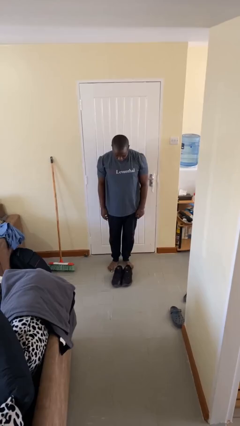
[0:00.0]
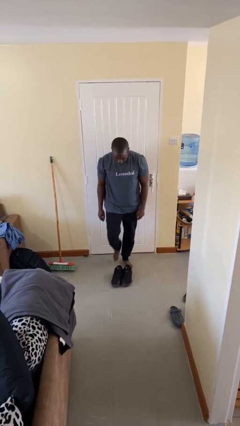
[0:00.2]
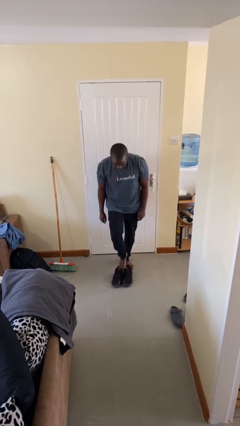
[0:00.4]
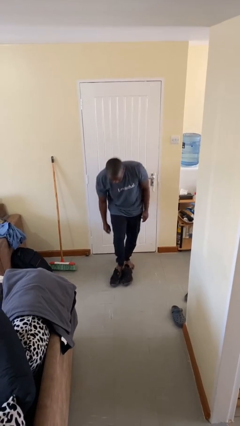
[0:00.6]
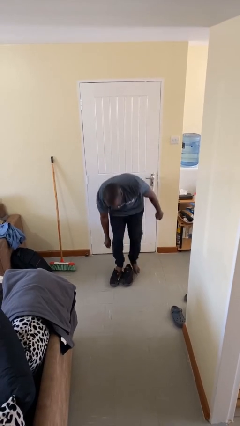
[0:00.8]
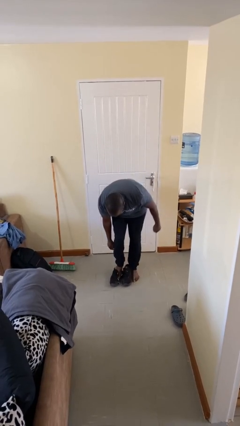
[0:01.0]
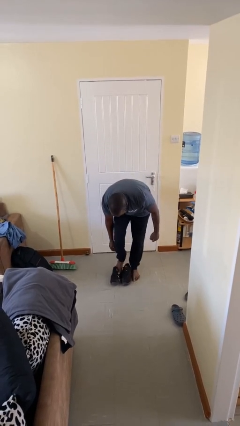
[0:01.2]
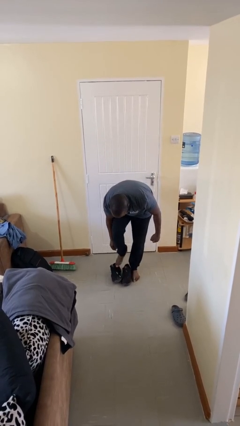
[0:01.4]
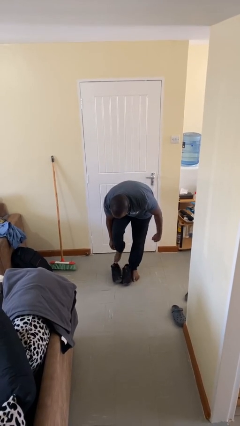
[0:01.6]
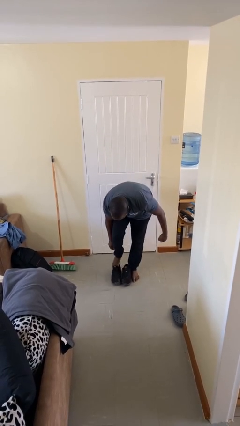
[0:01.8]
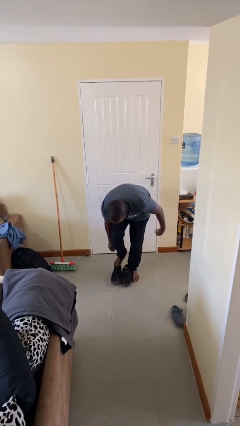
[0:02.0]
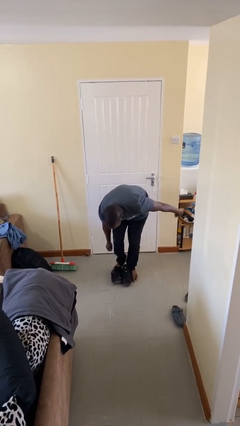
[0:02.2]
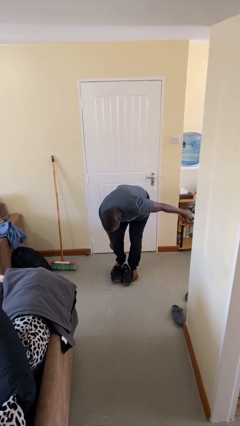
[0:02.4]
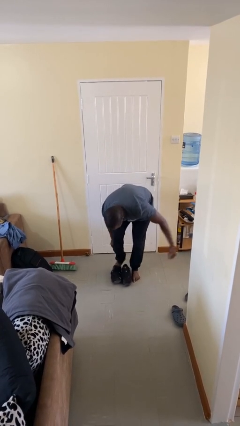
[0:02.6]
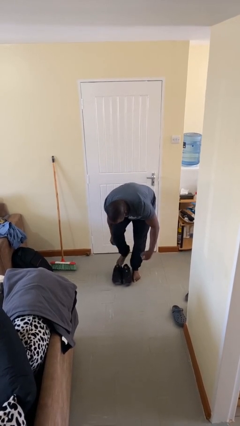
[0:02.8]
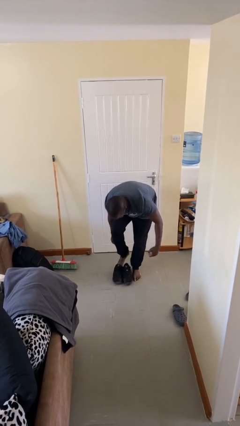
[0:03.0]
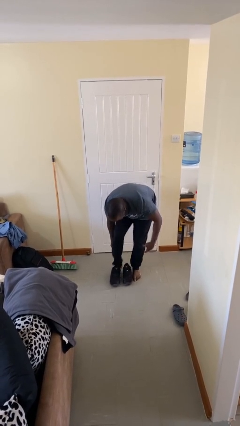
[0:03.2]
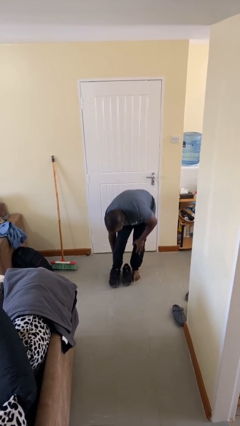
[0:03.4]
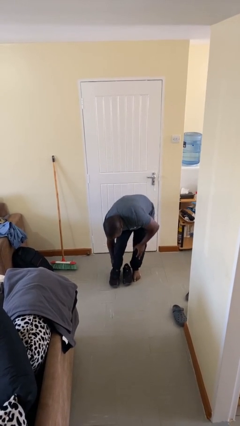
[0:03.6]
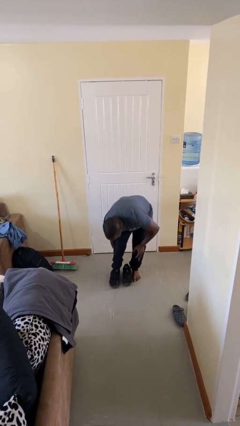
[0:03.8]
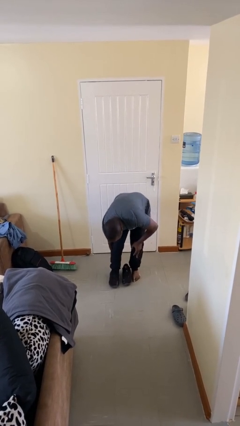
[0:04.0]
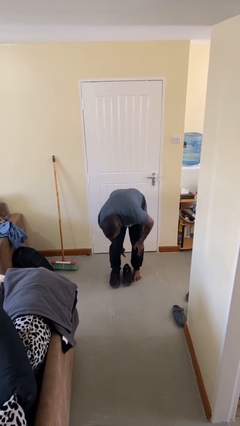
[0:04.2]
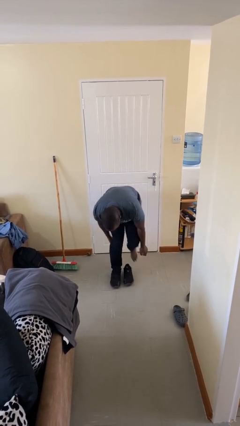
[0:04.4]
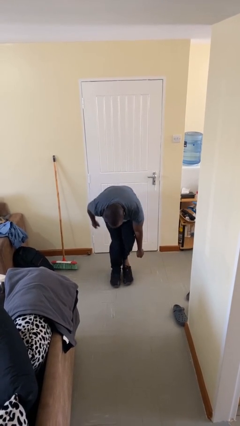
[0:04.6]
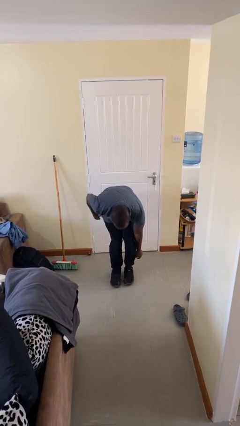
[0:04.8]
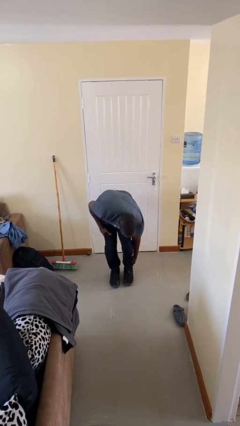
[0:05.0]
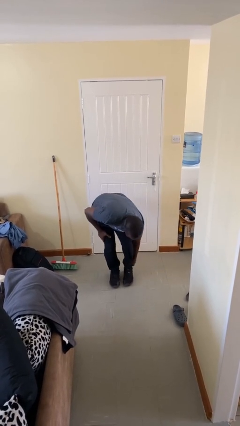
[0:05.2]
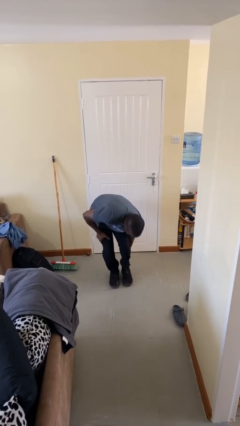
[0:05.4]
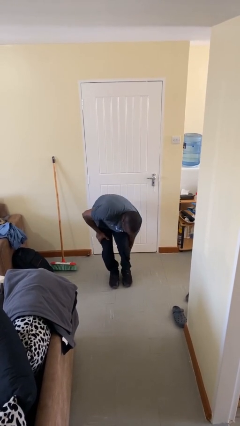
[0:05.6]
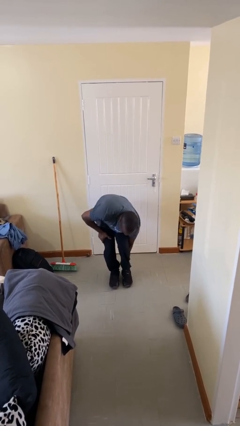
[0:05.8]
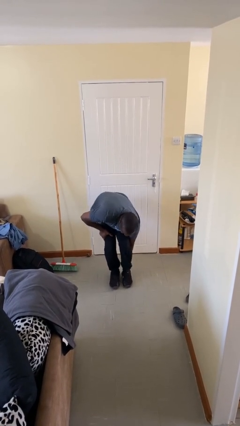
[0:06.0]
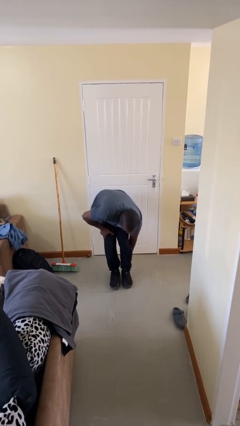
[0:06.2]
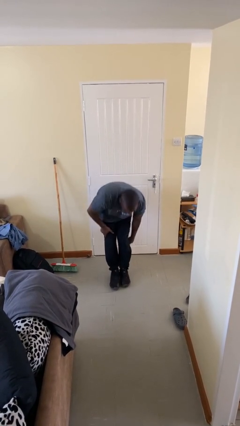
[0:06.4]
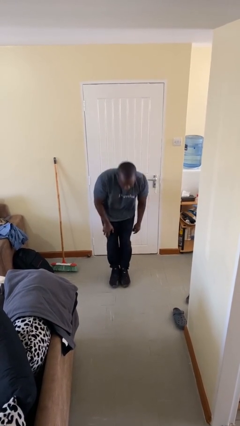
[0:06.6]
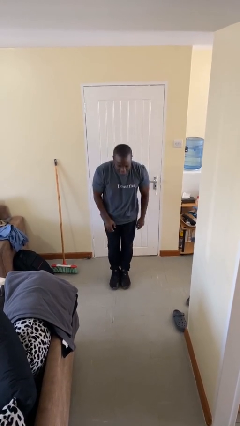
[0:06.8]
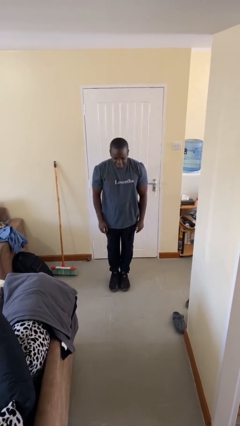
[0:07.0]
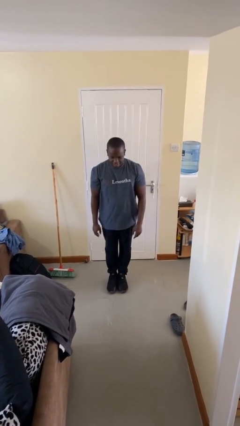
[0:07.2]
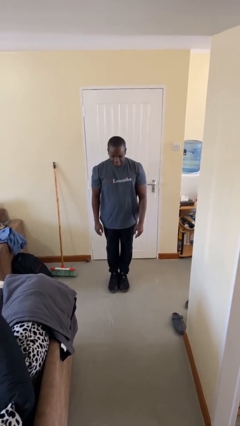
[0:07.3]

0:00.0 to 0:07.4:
person puts on shoes

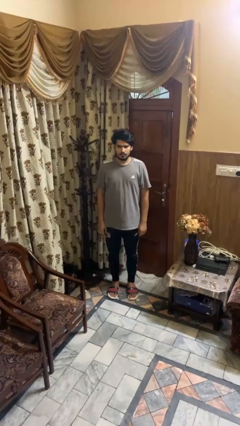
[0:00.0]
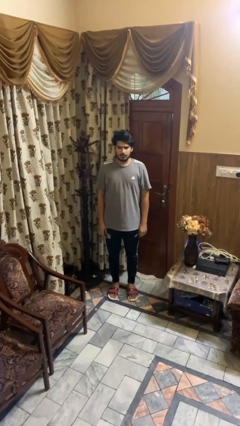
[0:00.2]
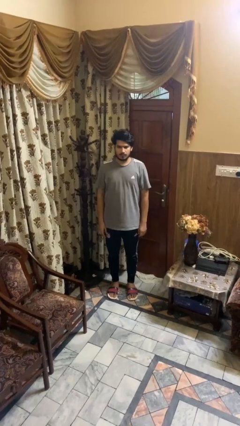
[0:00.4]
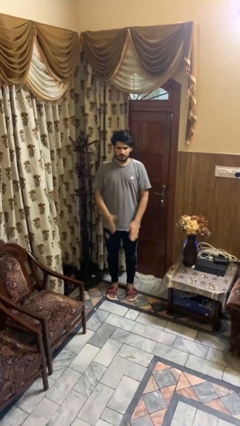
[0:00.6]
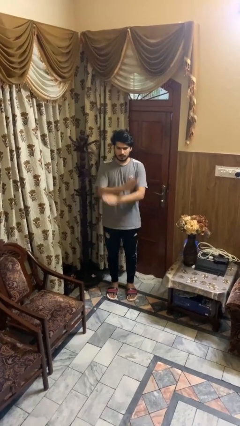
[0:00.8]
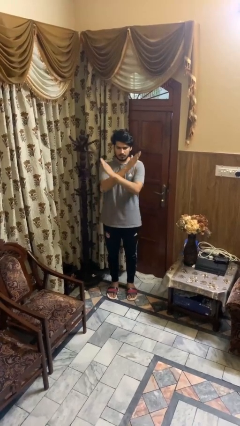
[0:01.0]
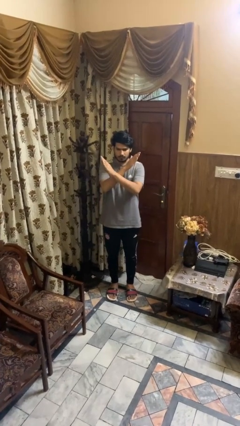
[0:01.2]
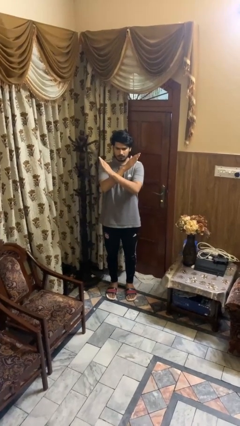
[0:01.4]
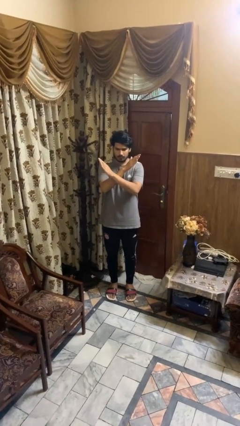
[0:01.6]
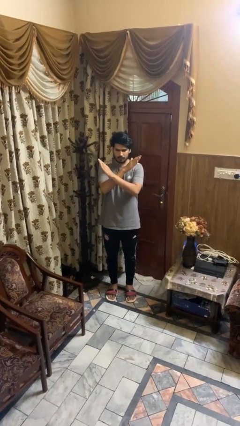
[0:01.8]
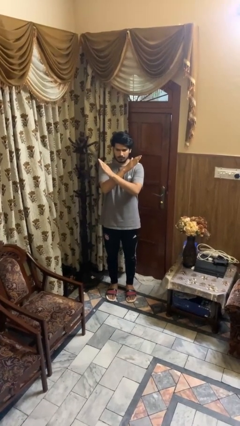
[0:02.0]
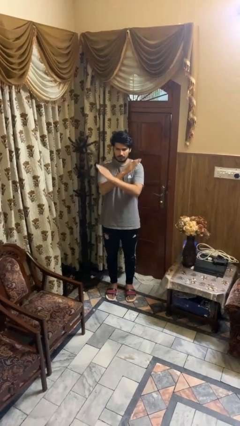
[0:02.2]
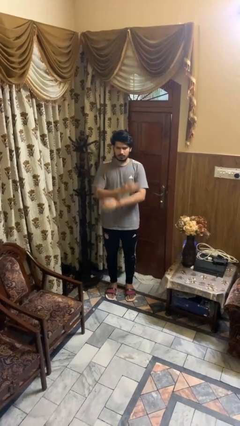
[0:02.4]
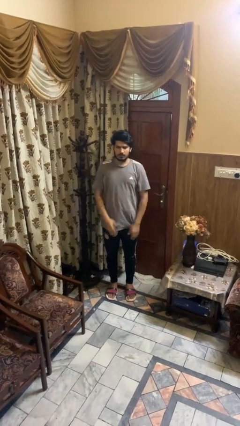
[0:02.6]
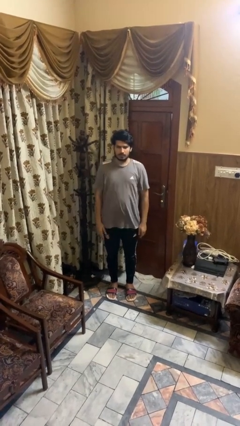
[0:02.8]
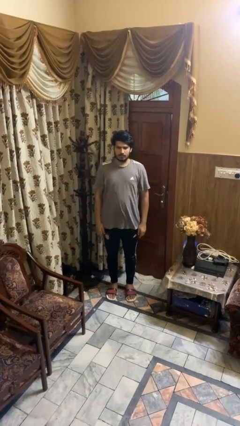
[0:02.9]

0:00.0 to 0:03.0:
person gestures arms x

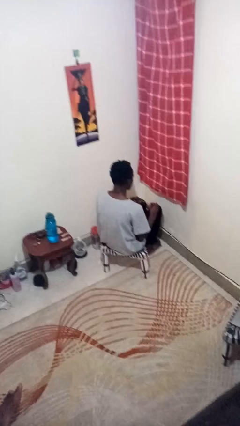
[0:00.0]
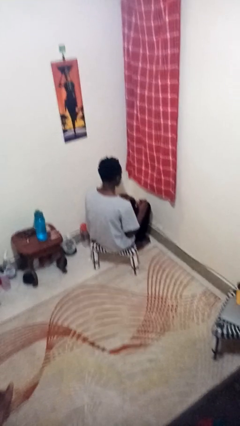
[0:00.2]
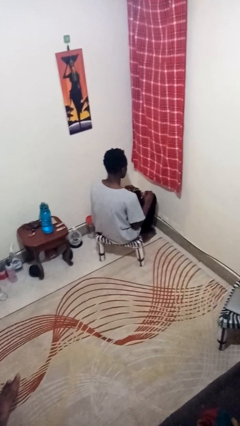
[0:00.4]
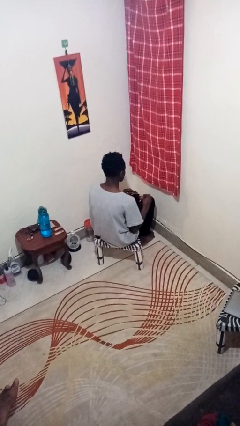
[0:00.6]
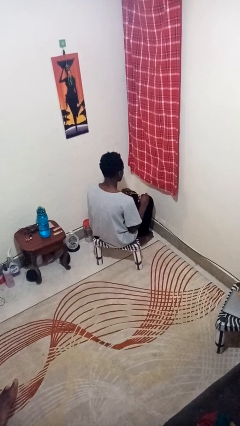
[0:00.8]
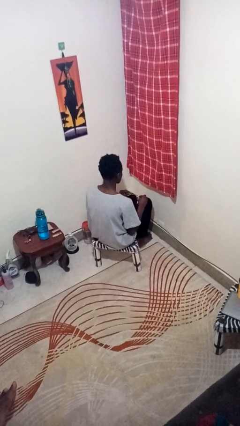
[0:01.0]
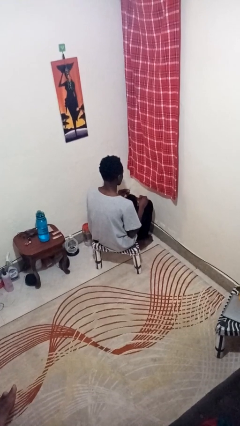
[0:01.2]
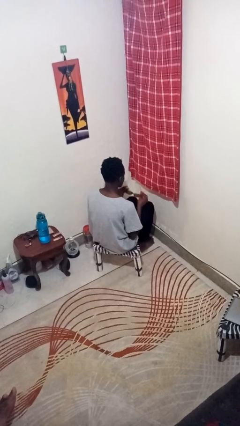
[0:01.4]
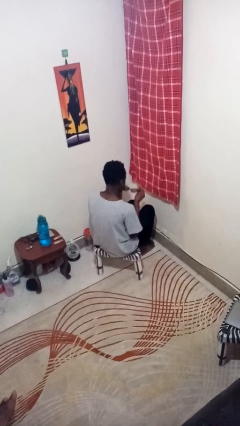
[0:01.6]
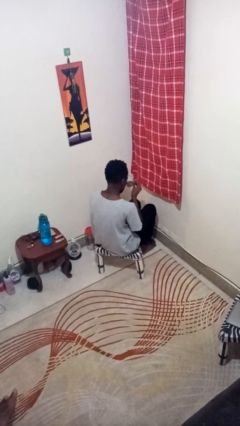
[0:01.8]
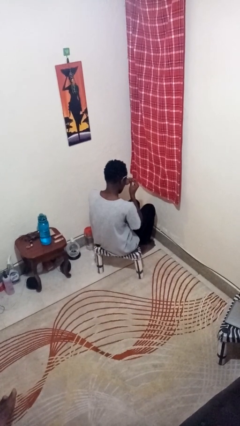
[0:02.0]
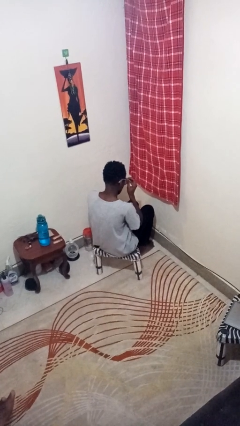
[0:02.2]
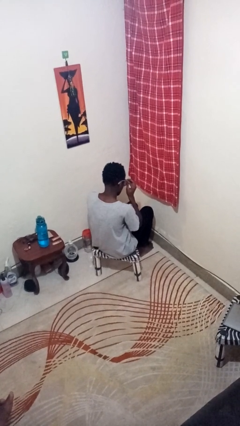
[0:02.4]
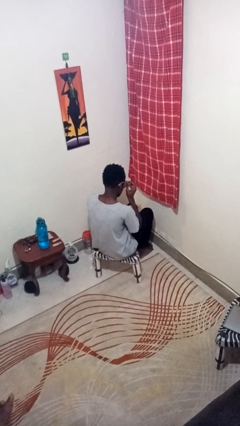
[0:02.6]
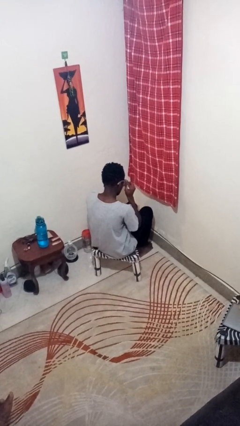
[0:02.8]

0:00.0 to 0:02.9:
person puts on glasses

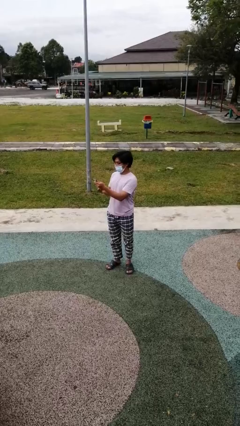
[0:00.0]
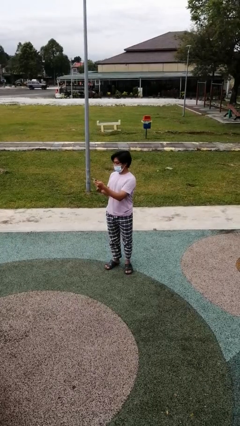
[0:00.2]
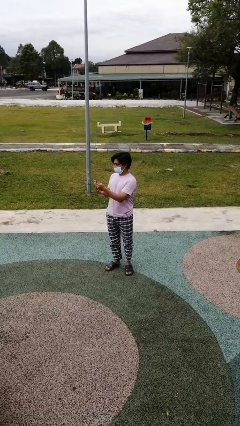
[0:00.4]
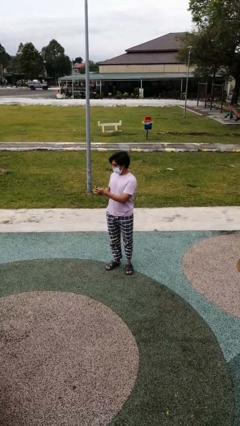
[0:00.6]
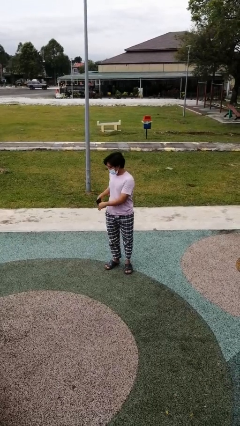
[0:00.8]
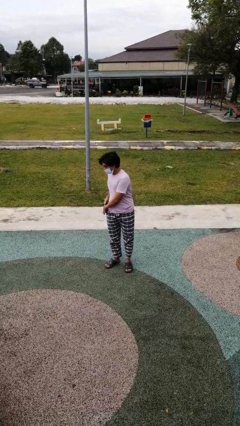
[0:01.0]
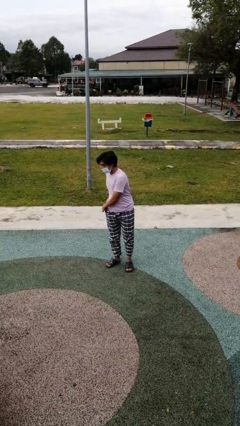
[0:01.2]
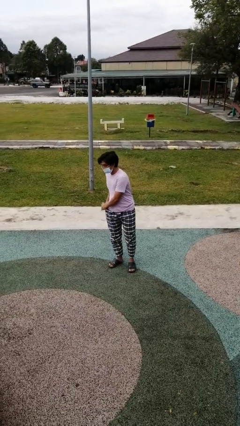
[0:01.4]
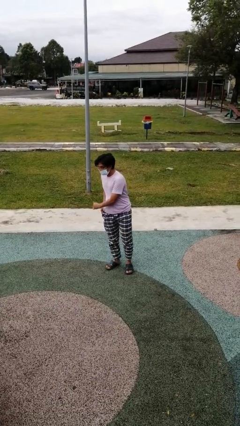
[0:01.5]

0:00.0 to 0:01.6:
person puts phone into pocket

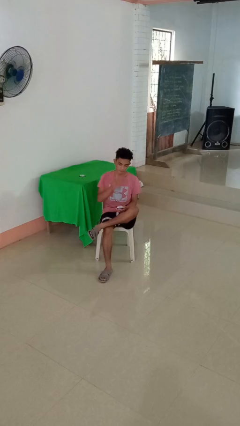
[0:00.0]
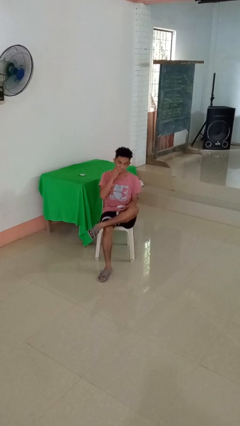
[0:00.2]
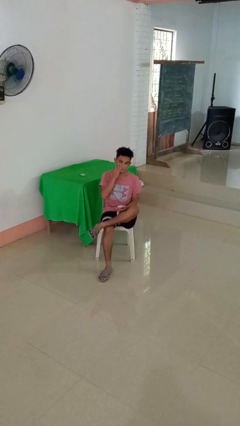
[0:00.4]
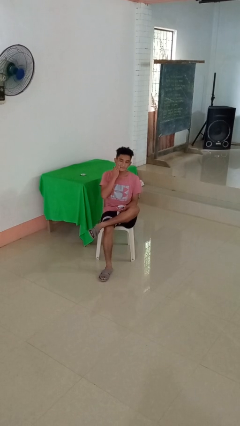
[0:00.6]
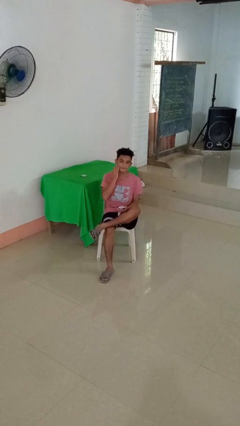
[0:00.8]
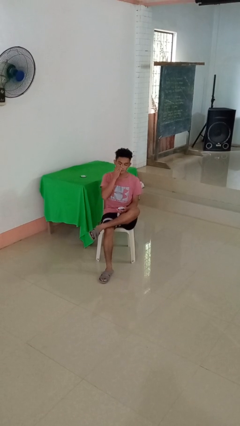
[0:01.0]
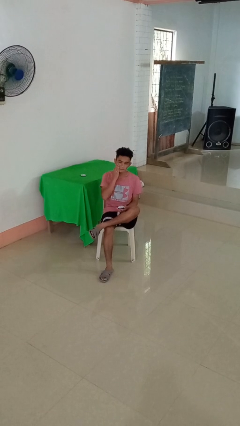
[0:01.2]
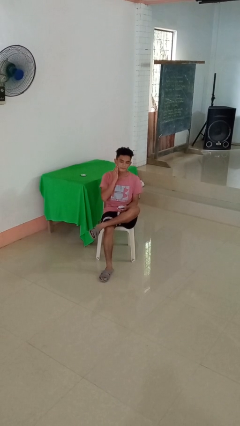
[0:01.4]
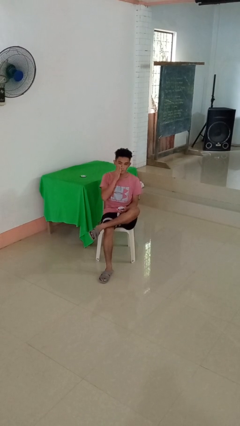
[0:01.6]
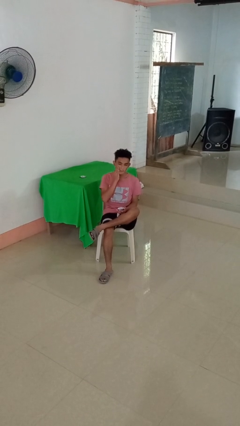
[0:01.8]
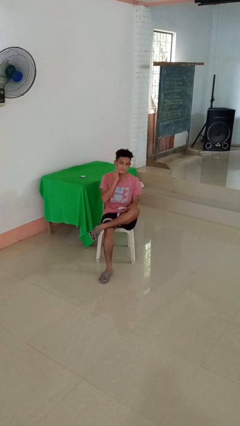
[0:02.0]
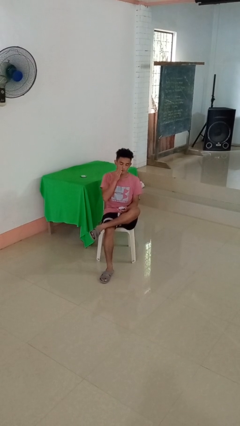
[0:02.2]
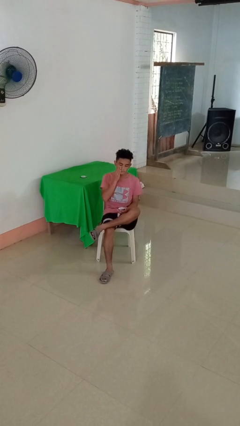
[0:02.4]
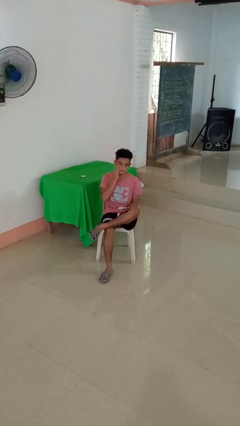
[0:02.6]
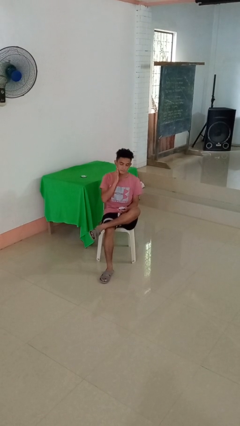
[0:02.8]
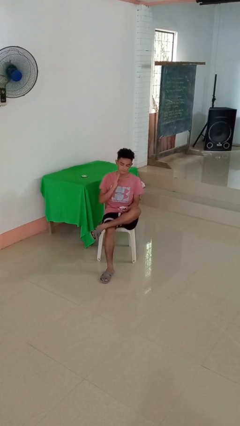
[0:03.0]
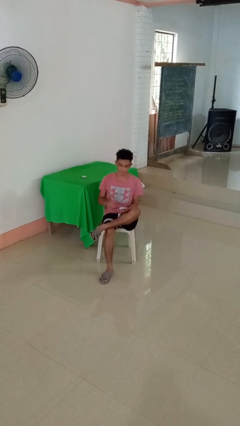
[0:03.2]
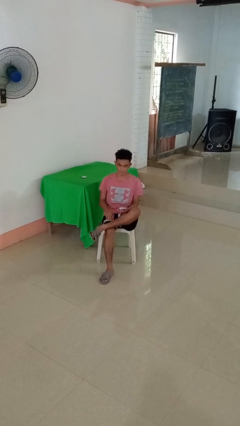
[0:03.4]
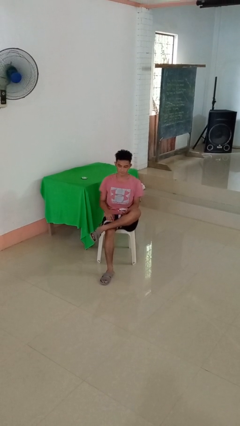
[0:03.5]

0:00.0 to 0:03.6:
person applies facial moisturizer
